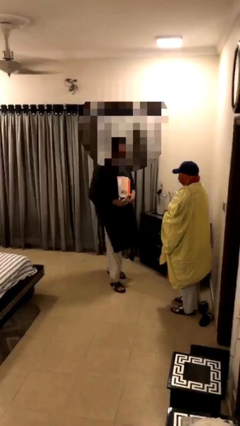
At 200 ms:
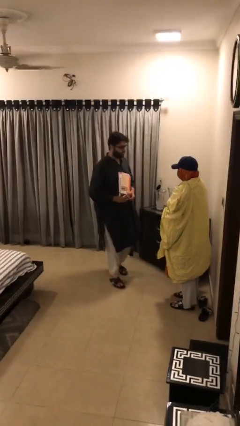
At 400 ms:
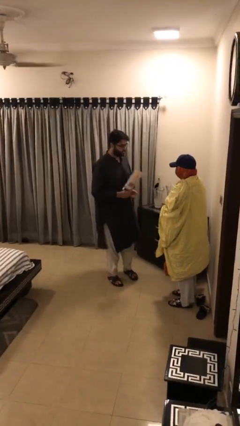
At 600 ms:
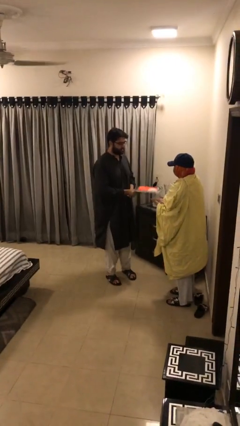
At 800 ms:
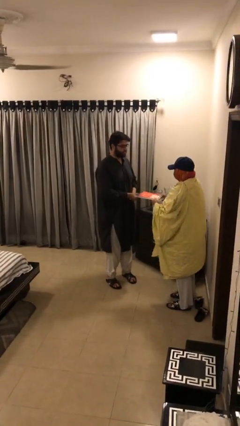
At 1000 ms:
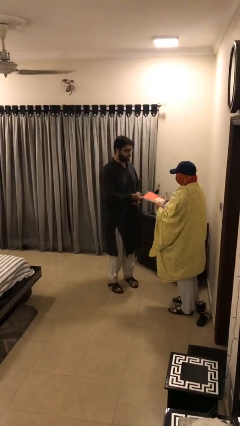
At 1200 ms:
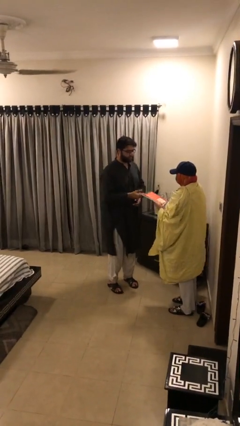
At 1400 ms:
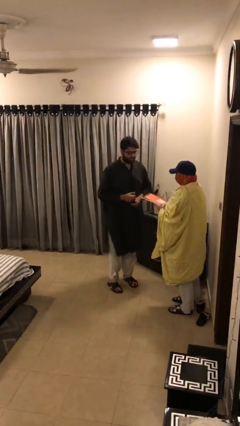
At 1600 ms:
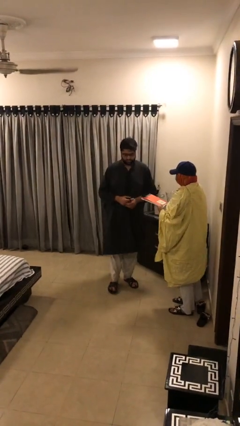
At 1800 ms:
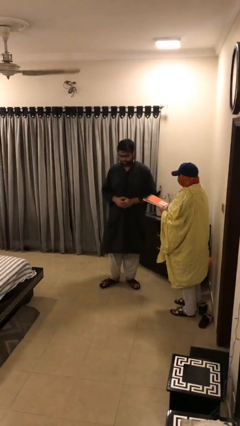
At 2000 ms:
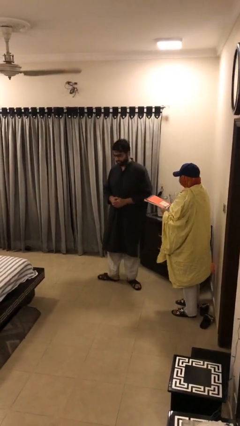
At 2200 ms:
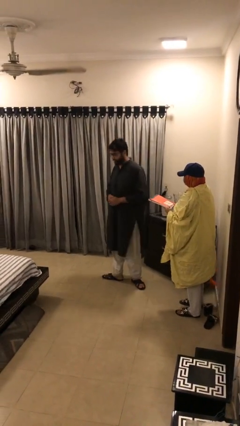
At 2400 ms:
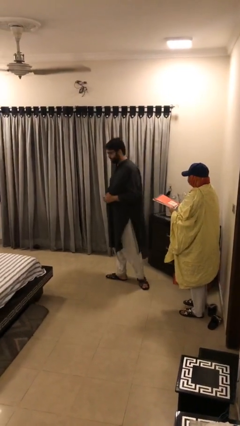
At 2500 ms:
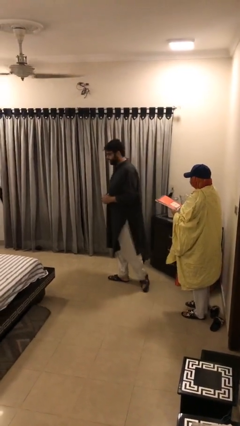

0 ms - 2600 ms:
person transfers object to person

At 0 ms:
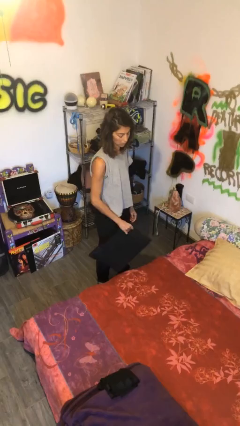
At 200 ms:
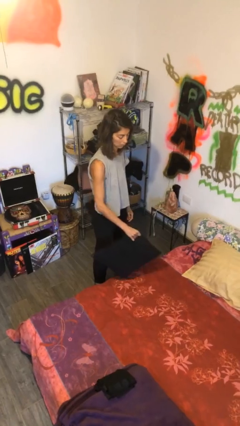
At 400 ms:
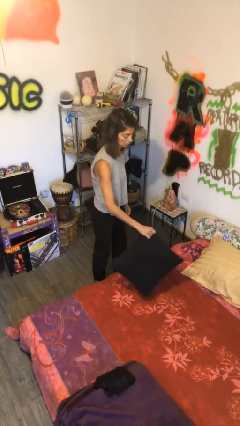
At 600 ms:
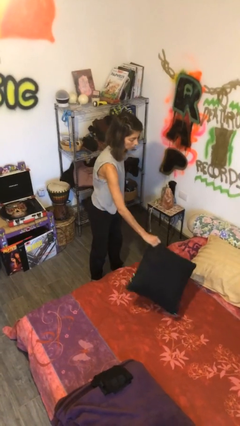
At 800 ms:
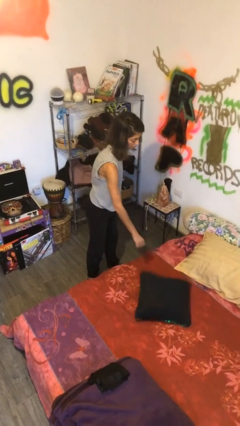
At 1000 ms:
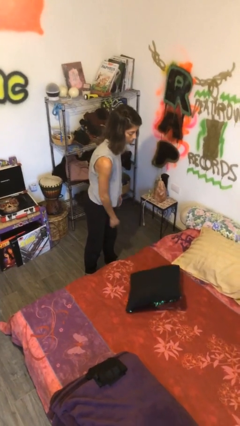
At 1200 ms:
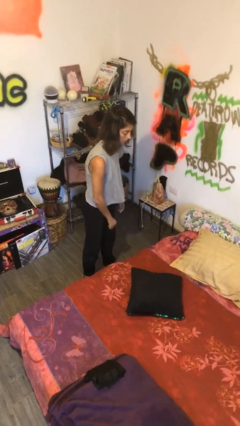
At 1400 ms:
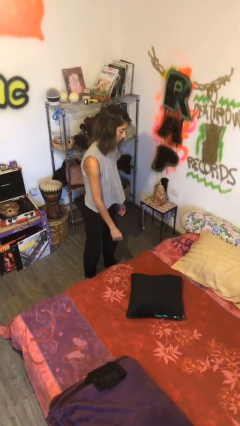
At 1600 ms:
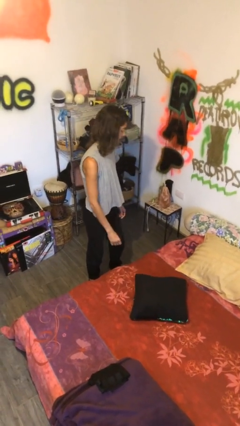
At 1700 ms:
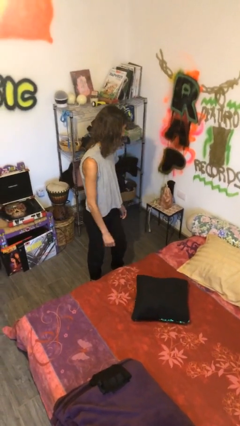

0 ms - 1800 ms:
person puts down object on bed

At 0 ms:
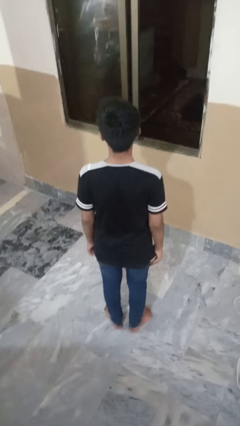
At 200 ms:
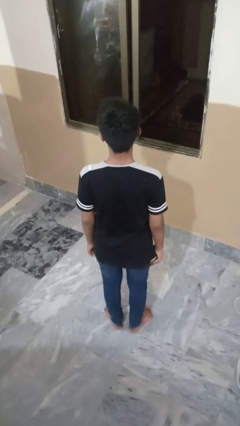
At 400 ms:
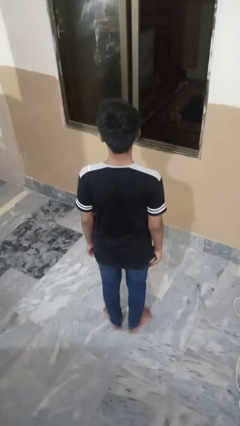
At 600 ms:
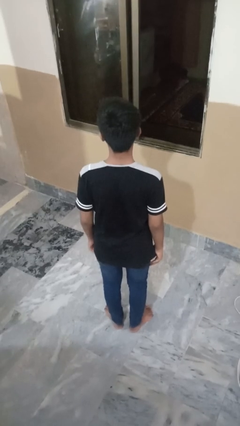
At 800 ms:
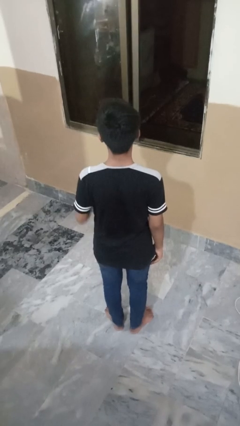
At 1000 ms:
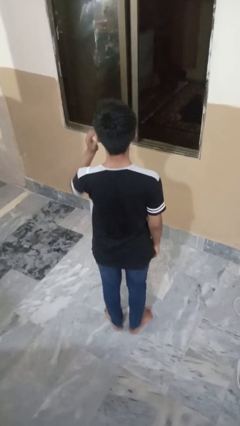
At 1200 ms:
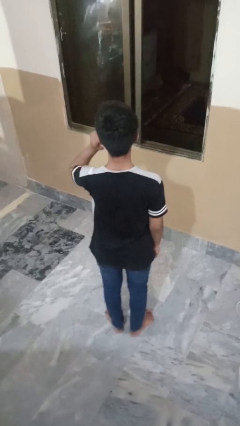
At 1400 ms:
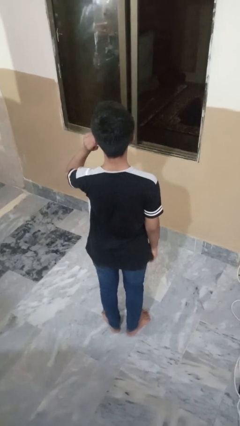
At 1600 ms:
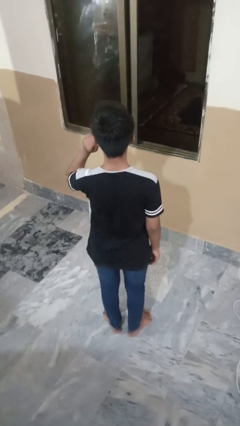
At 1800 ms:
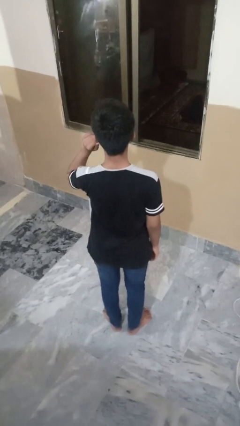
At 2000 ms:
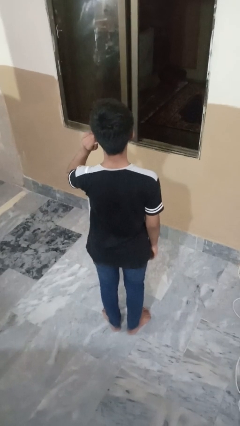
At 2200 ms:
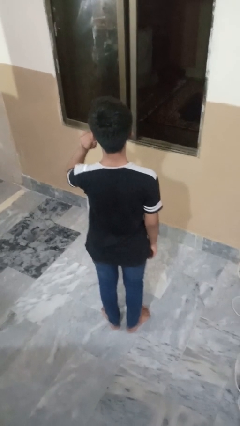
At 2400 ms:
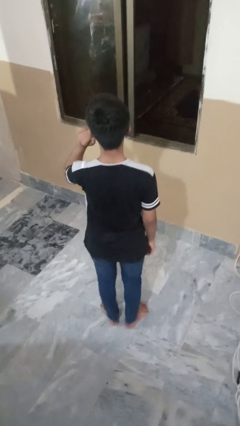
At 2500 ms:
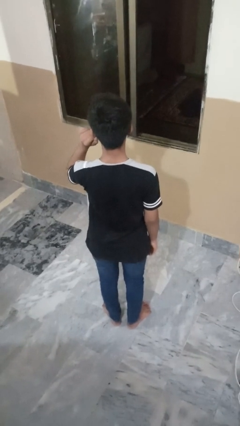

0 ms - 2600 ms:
person touches earlobe

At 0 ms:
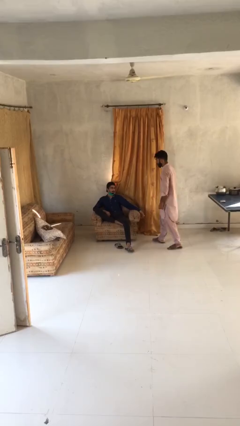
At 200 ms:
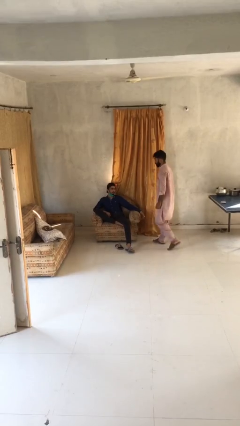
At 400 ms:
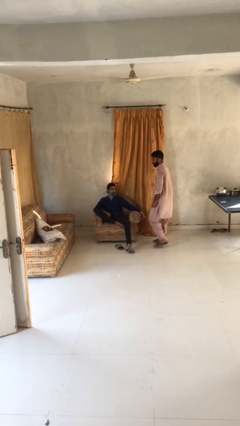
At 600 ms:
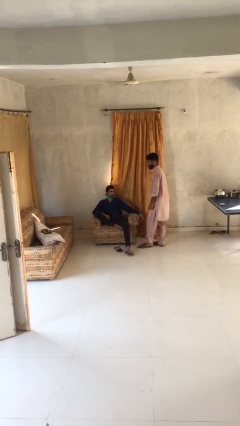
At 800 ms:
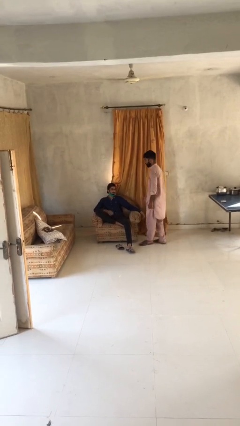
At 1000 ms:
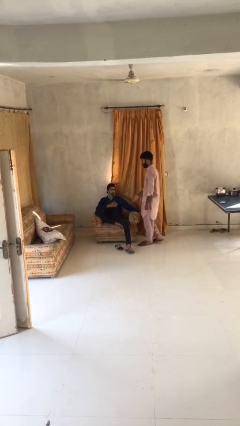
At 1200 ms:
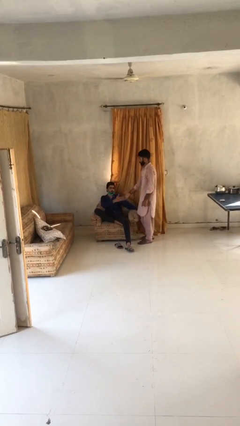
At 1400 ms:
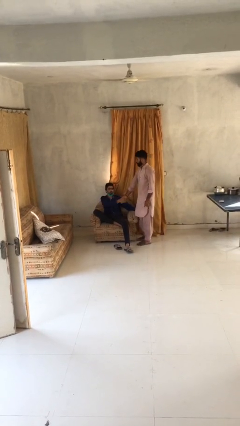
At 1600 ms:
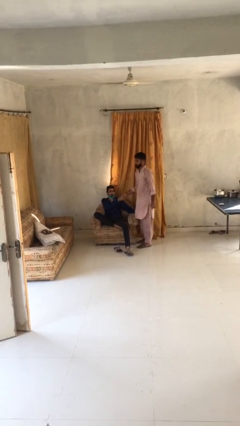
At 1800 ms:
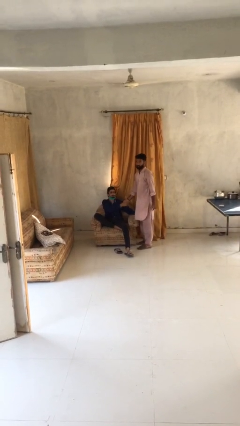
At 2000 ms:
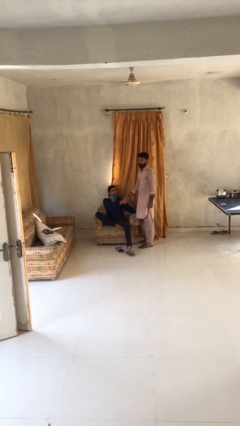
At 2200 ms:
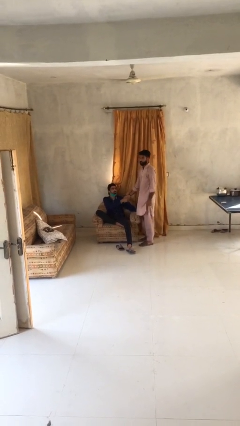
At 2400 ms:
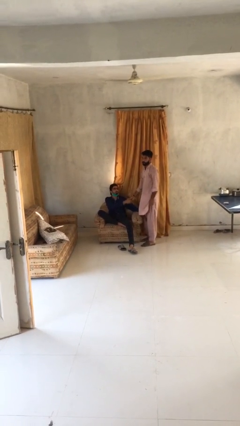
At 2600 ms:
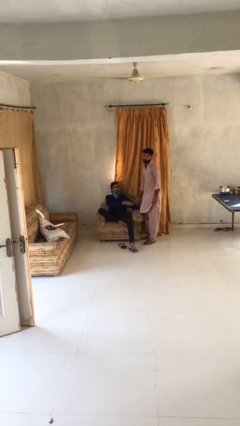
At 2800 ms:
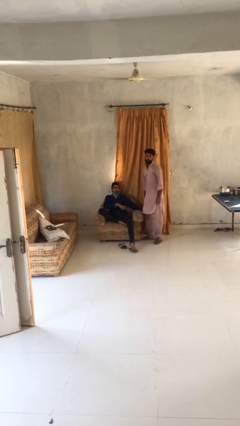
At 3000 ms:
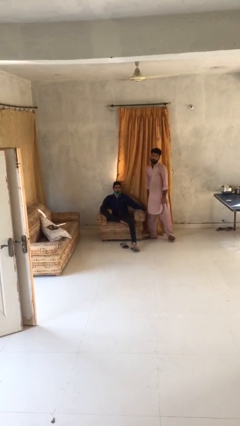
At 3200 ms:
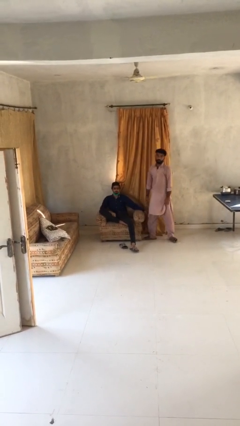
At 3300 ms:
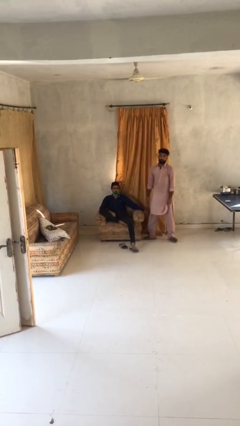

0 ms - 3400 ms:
person shakes hand

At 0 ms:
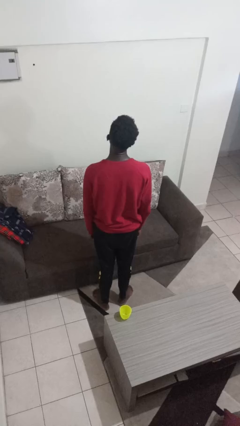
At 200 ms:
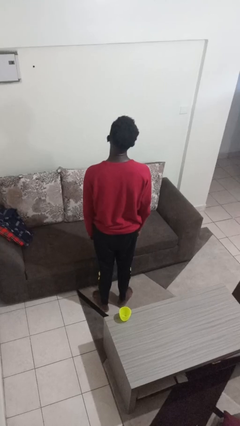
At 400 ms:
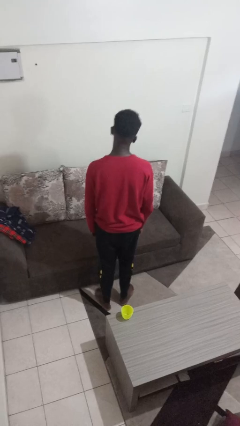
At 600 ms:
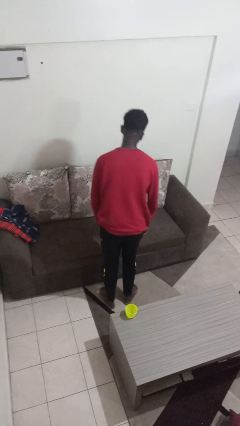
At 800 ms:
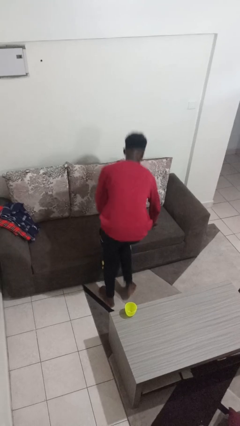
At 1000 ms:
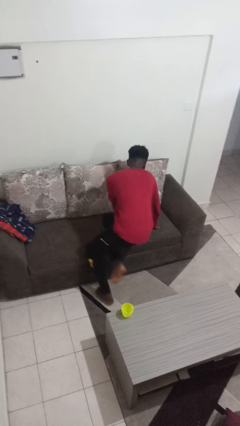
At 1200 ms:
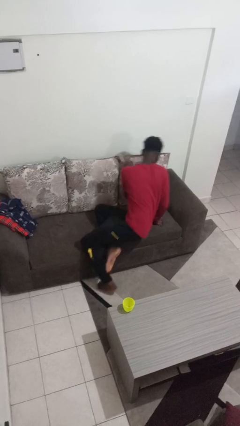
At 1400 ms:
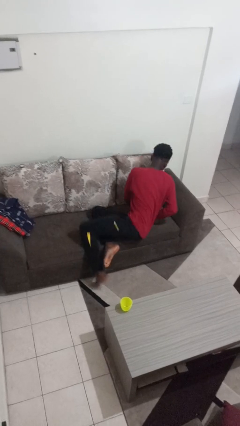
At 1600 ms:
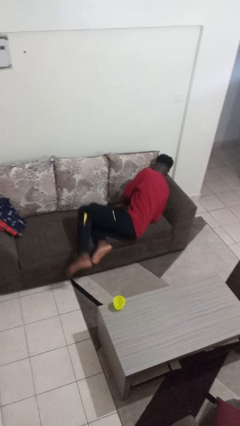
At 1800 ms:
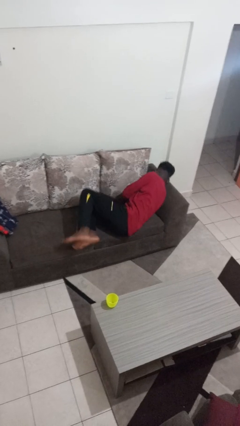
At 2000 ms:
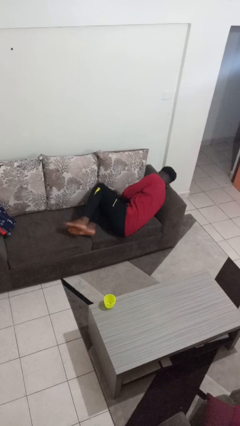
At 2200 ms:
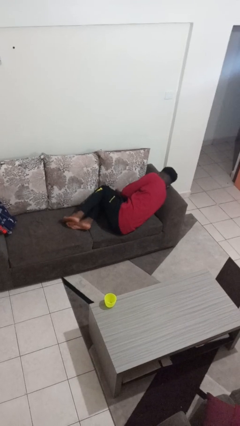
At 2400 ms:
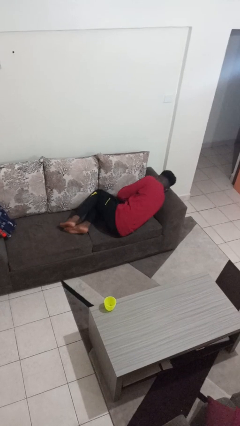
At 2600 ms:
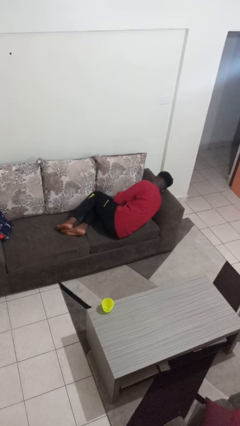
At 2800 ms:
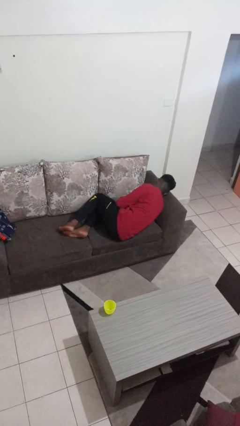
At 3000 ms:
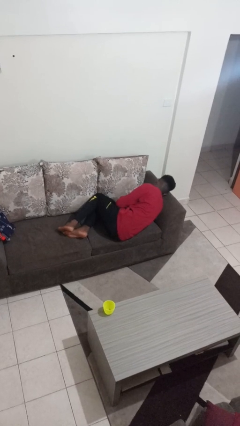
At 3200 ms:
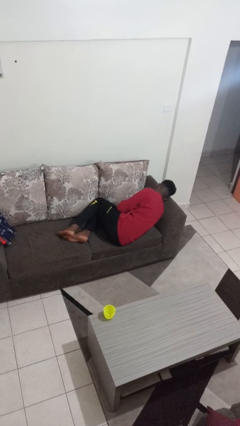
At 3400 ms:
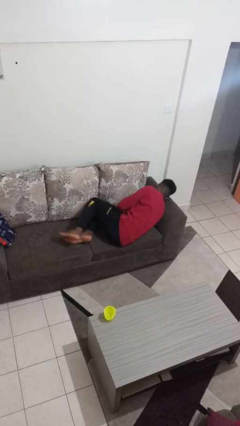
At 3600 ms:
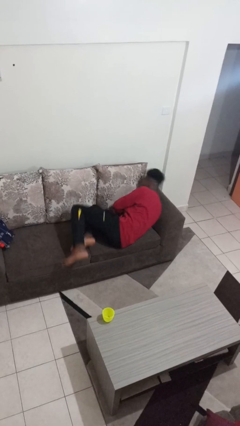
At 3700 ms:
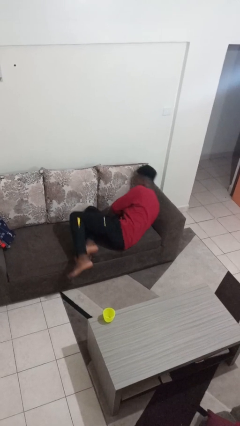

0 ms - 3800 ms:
person lies down on couch

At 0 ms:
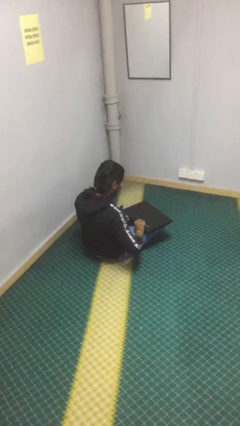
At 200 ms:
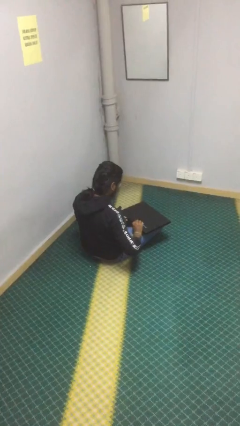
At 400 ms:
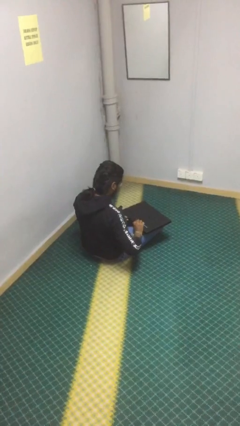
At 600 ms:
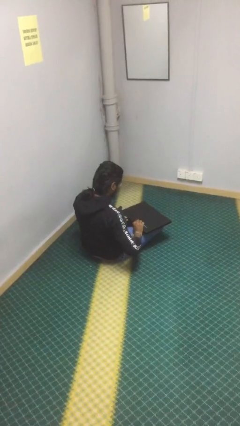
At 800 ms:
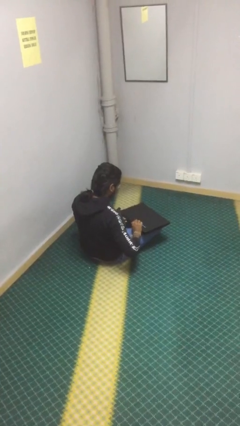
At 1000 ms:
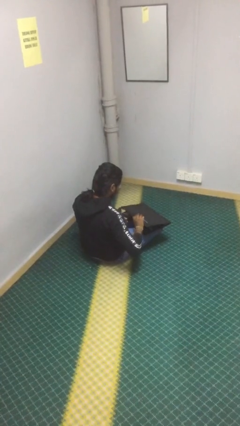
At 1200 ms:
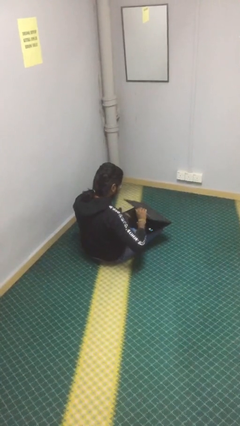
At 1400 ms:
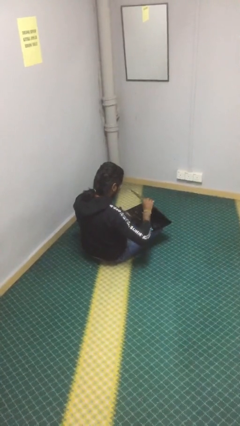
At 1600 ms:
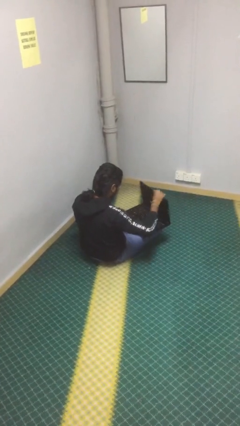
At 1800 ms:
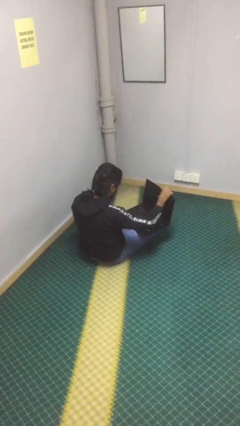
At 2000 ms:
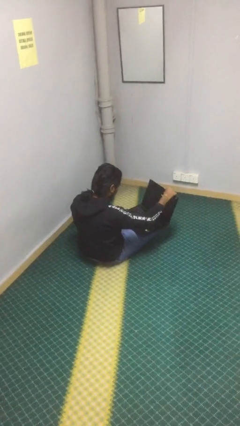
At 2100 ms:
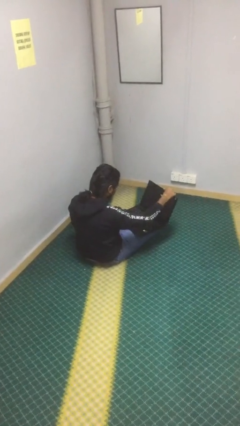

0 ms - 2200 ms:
person opens laptop

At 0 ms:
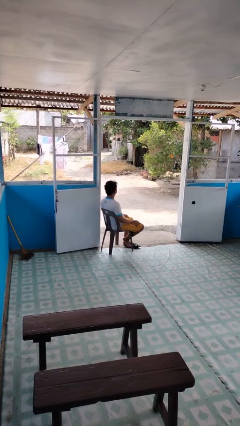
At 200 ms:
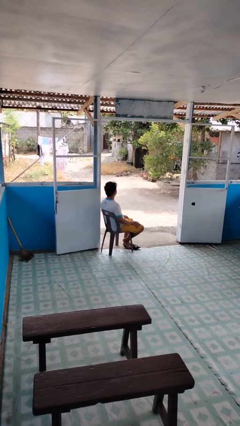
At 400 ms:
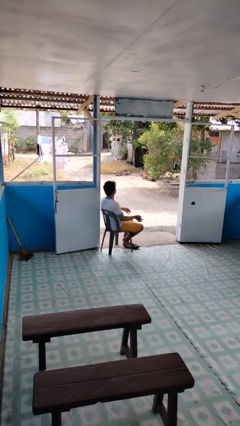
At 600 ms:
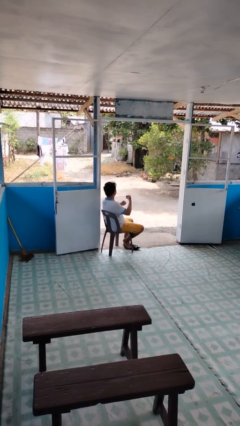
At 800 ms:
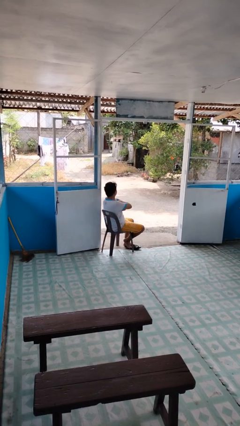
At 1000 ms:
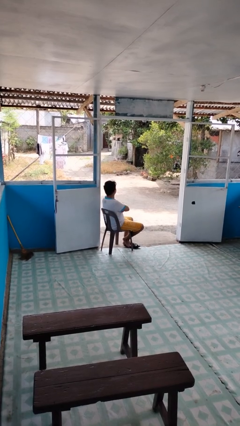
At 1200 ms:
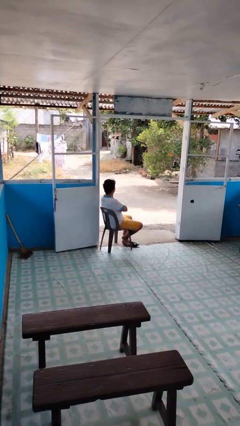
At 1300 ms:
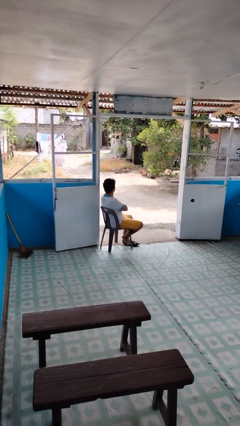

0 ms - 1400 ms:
person crosses arms
